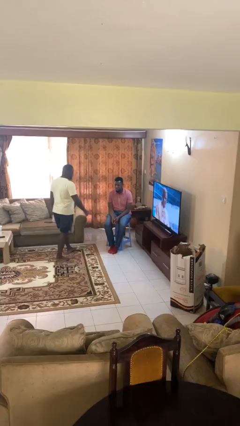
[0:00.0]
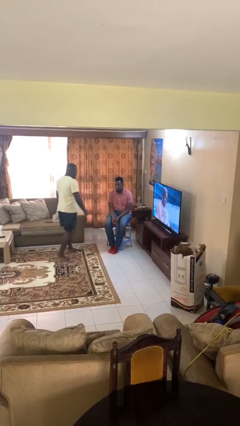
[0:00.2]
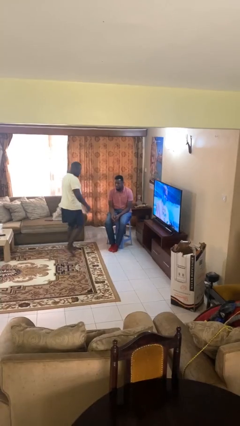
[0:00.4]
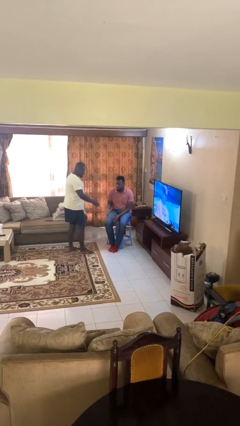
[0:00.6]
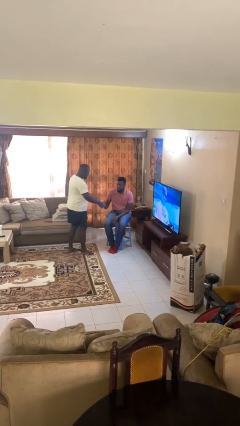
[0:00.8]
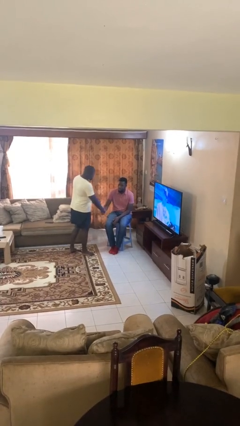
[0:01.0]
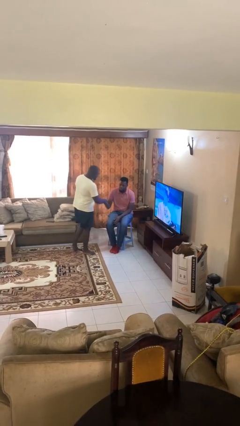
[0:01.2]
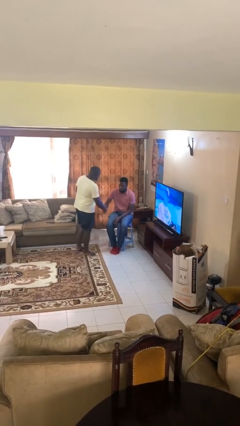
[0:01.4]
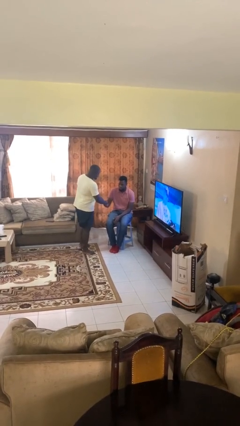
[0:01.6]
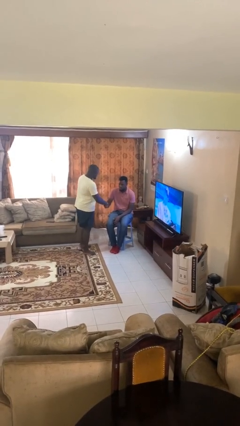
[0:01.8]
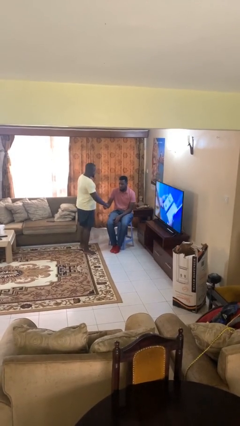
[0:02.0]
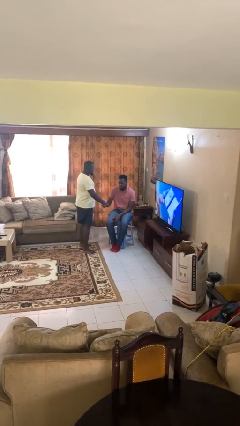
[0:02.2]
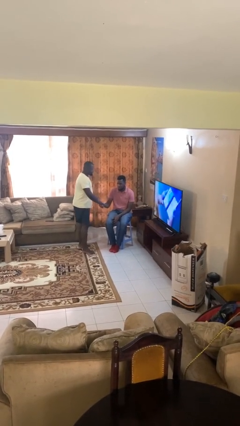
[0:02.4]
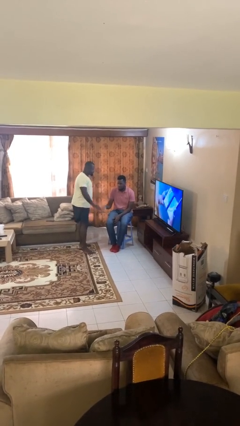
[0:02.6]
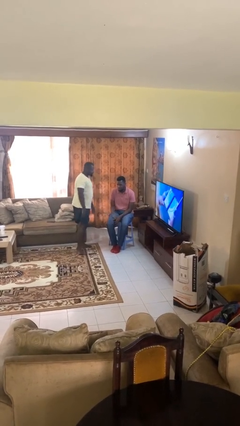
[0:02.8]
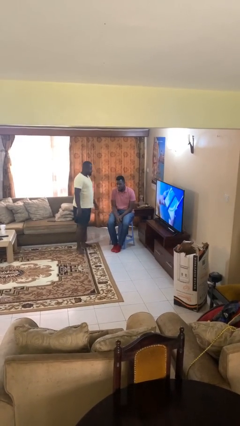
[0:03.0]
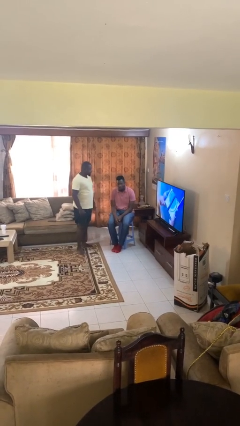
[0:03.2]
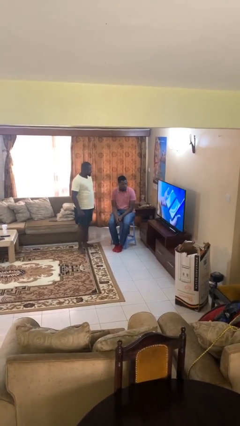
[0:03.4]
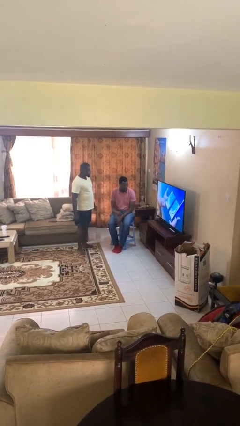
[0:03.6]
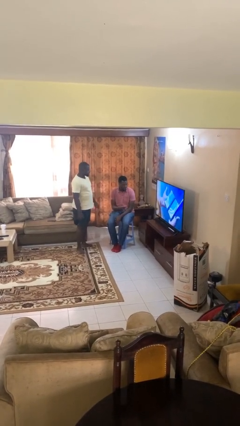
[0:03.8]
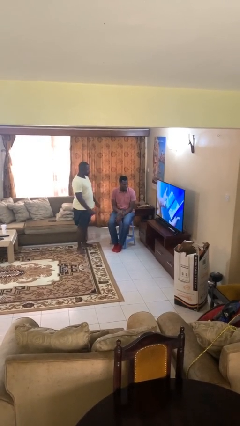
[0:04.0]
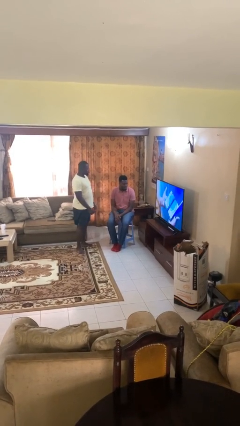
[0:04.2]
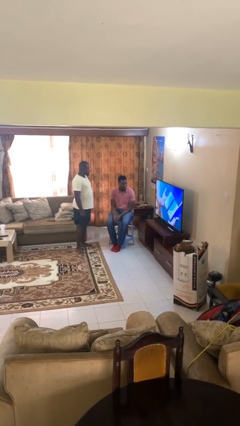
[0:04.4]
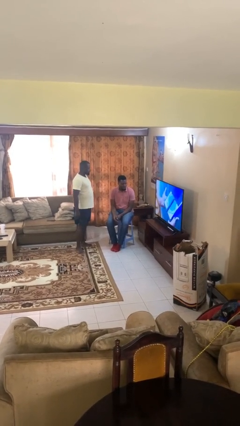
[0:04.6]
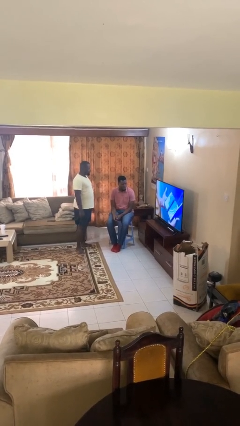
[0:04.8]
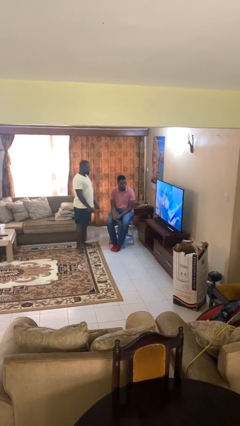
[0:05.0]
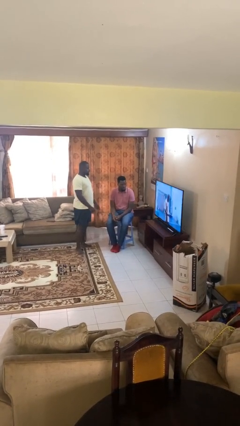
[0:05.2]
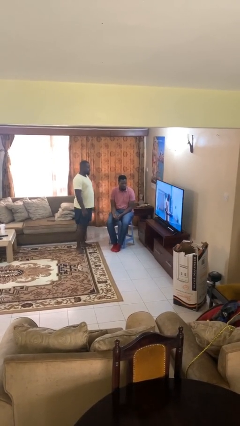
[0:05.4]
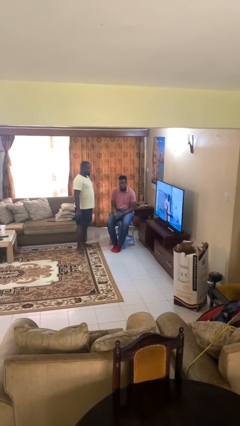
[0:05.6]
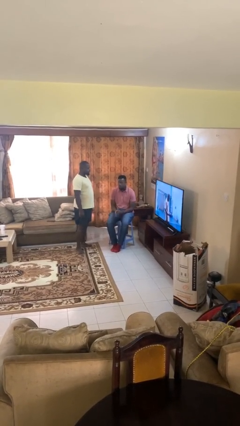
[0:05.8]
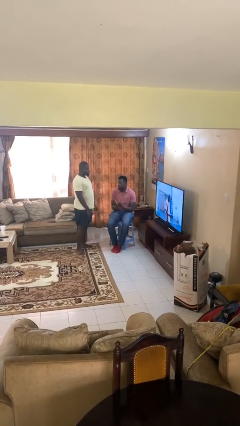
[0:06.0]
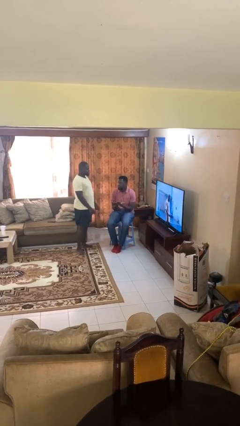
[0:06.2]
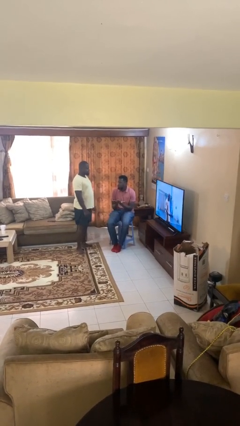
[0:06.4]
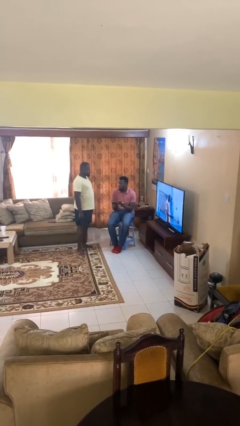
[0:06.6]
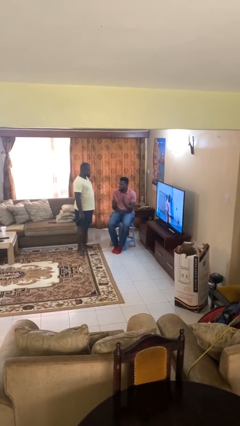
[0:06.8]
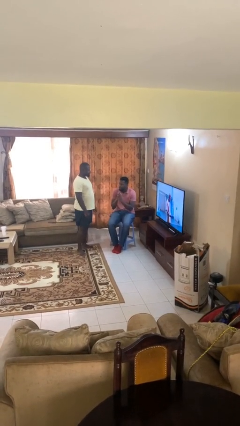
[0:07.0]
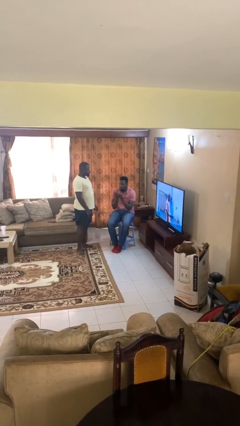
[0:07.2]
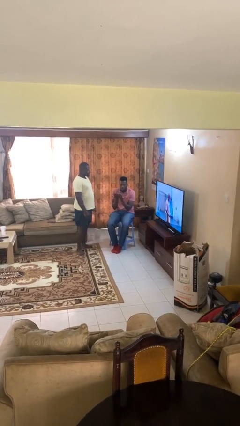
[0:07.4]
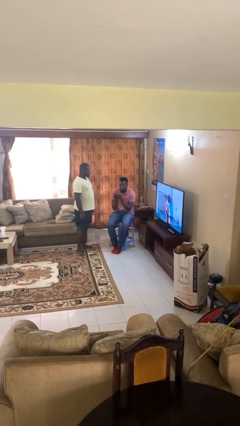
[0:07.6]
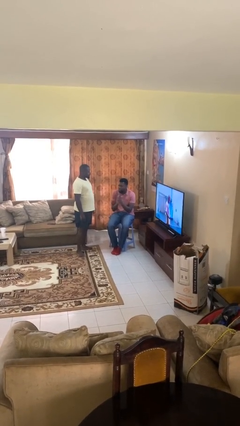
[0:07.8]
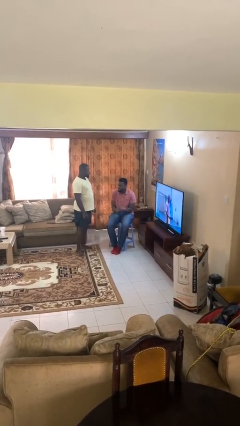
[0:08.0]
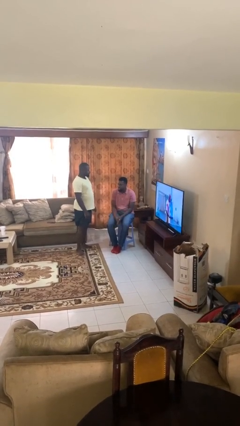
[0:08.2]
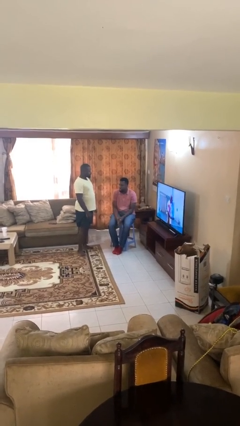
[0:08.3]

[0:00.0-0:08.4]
person shakes hand

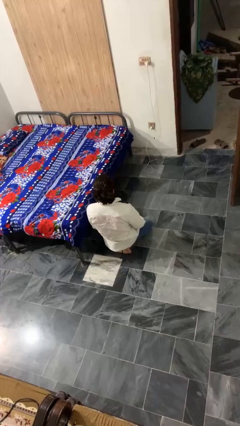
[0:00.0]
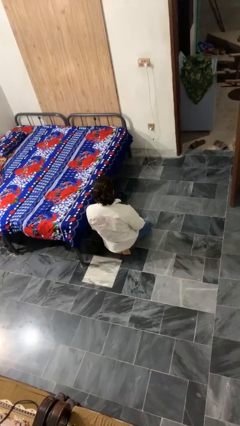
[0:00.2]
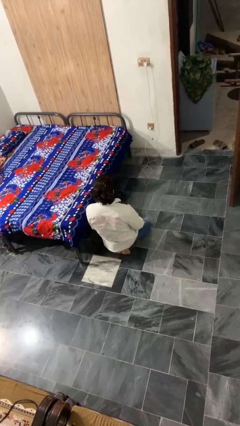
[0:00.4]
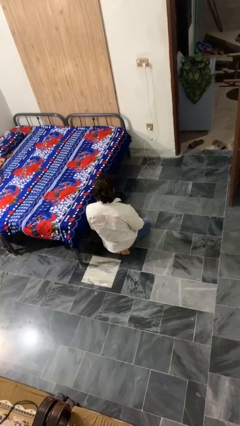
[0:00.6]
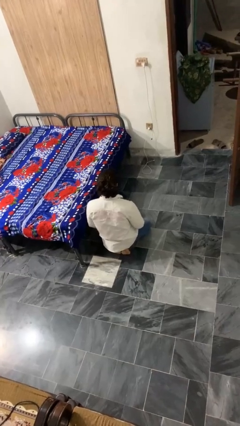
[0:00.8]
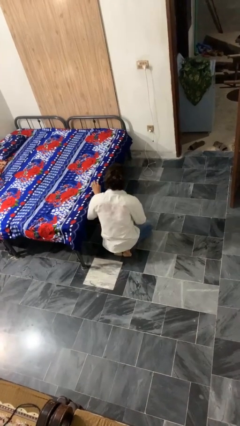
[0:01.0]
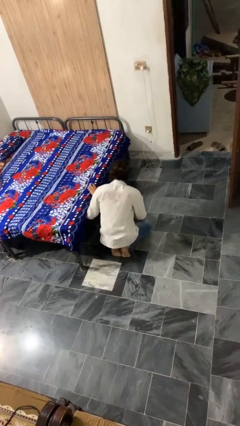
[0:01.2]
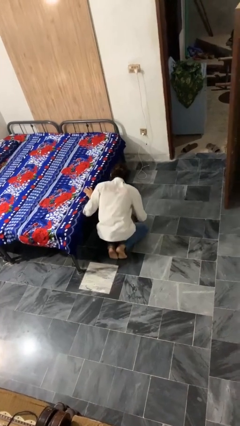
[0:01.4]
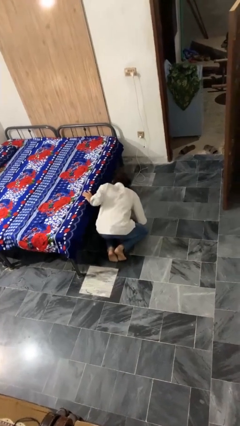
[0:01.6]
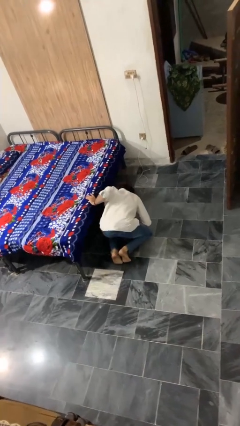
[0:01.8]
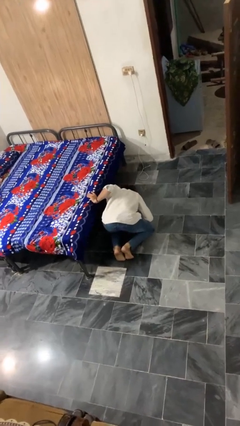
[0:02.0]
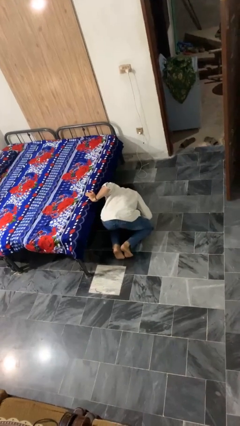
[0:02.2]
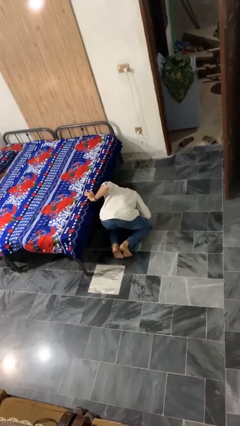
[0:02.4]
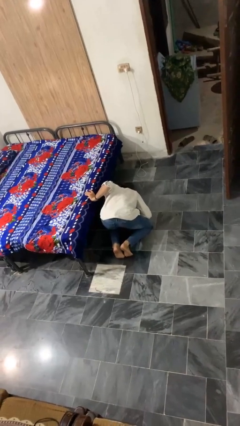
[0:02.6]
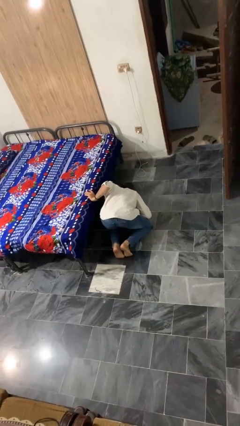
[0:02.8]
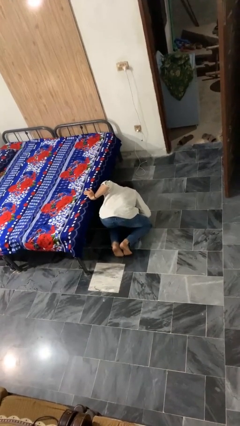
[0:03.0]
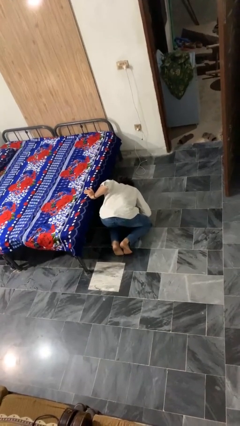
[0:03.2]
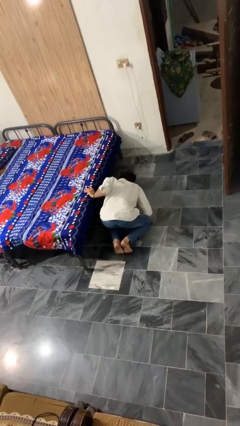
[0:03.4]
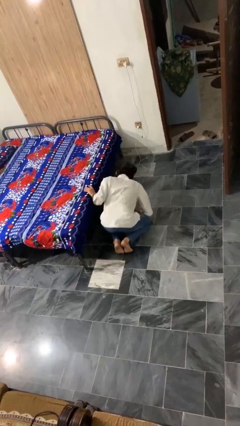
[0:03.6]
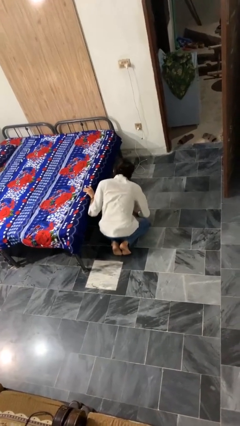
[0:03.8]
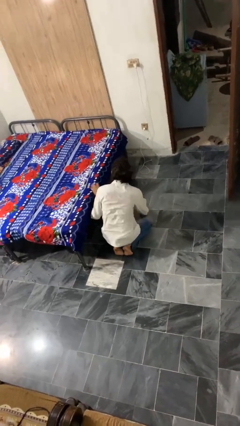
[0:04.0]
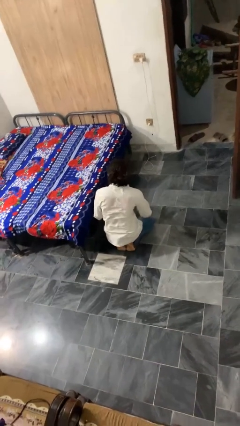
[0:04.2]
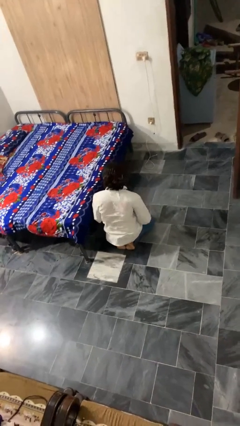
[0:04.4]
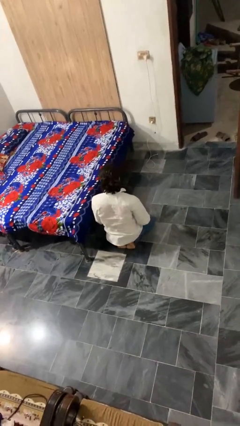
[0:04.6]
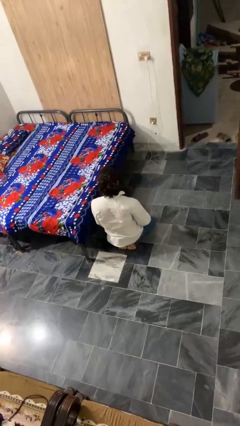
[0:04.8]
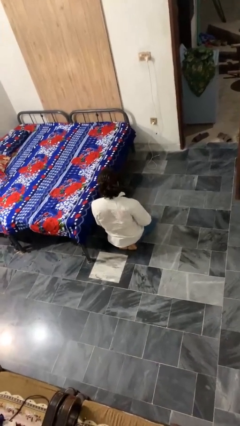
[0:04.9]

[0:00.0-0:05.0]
person searches under bed

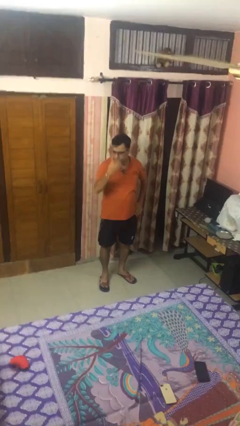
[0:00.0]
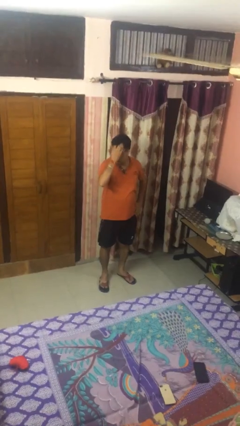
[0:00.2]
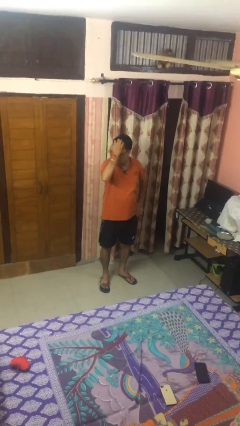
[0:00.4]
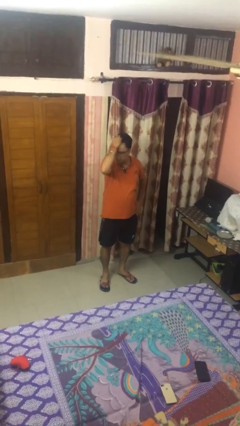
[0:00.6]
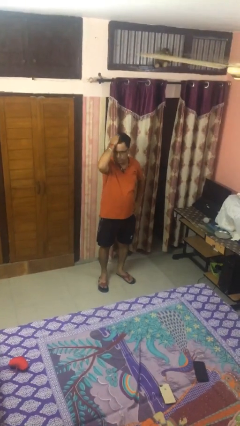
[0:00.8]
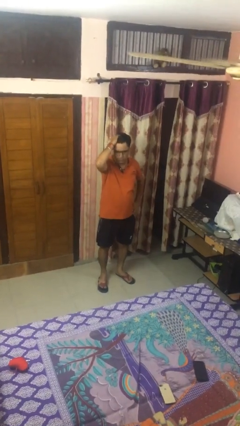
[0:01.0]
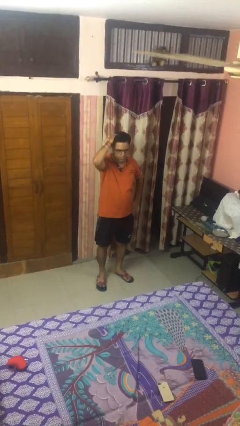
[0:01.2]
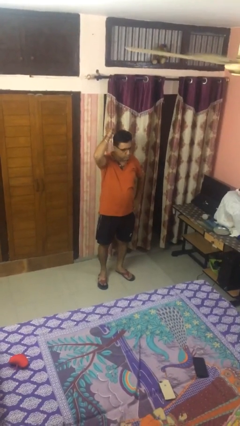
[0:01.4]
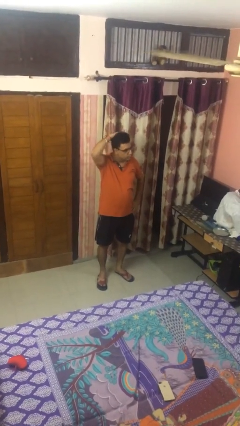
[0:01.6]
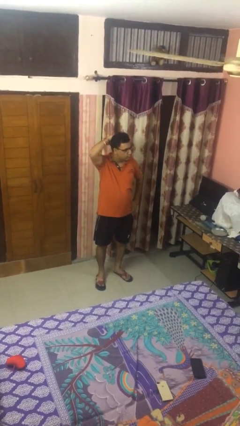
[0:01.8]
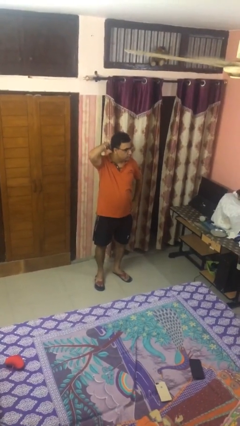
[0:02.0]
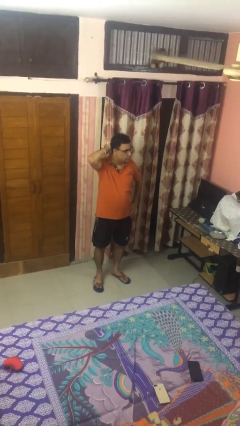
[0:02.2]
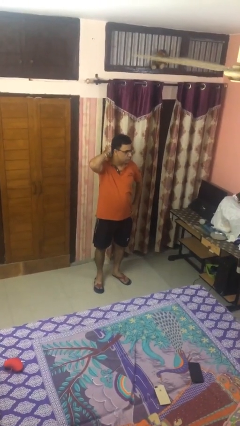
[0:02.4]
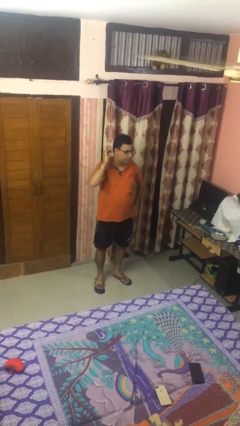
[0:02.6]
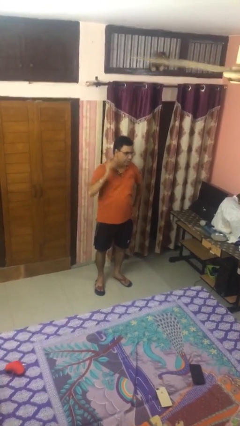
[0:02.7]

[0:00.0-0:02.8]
person strokes hair

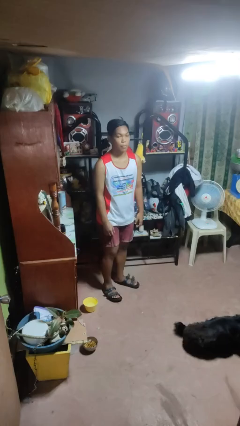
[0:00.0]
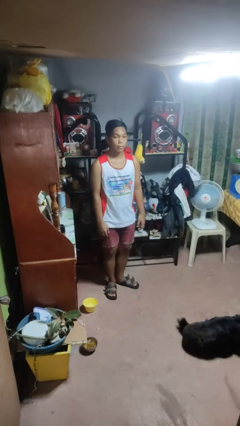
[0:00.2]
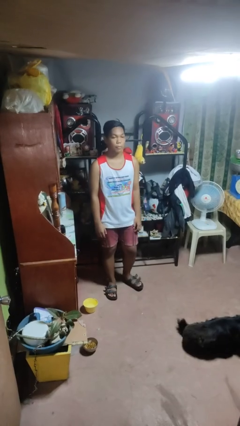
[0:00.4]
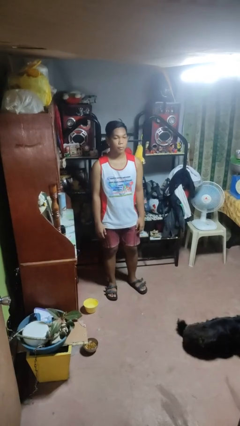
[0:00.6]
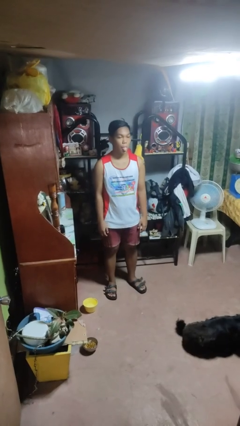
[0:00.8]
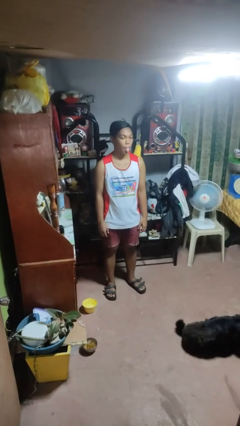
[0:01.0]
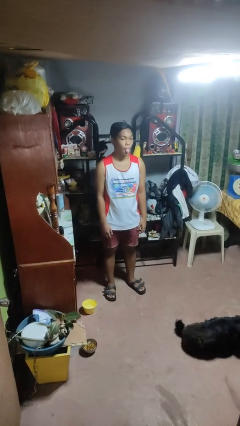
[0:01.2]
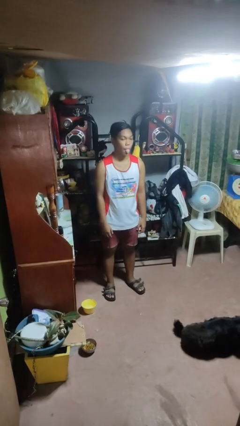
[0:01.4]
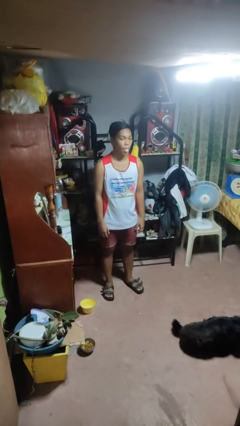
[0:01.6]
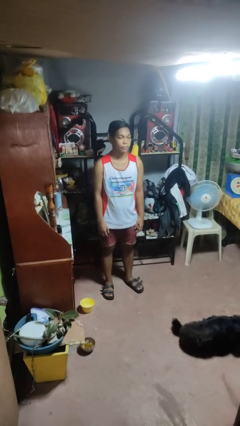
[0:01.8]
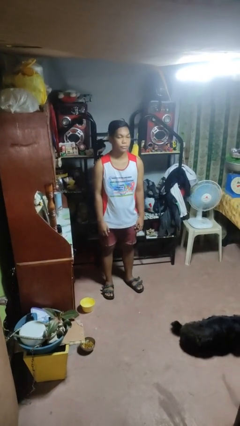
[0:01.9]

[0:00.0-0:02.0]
person sticks out tongue
